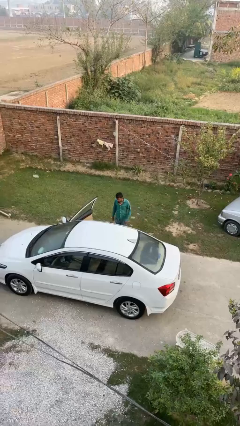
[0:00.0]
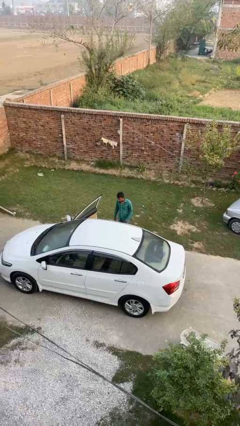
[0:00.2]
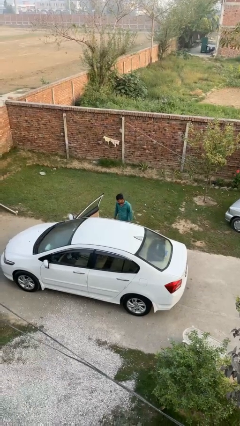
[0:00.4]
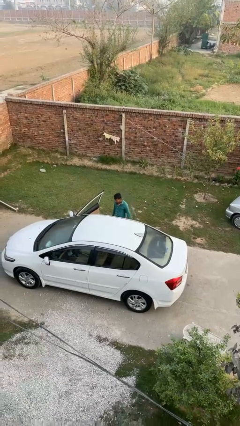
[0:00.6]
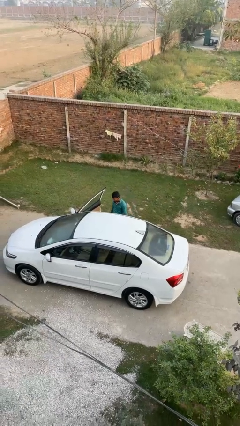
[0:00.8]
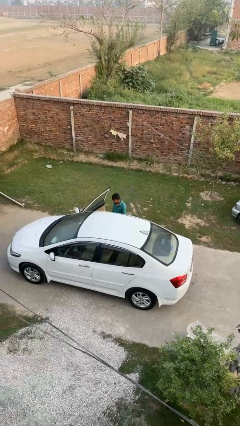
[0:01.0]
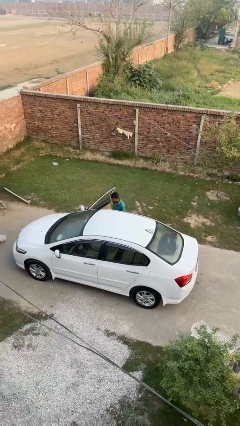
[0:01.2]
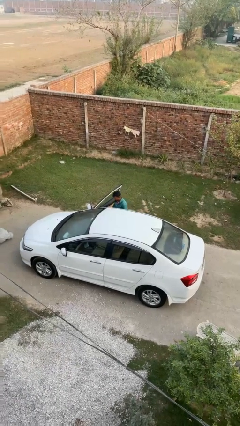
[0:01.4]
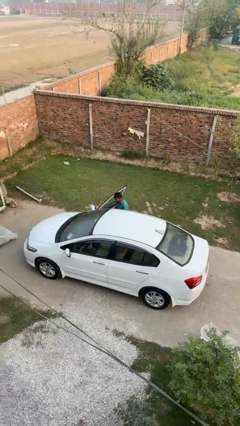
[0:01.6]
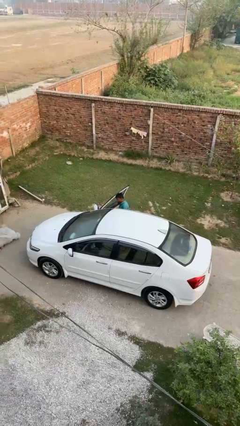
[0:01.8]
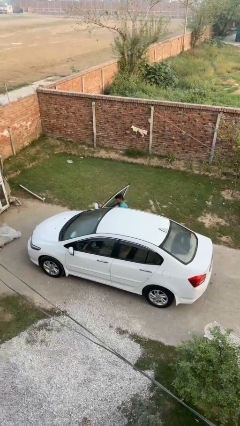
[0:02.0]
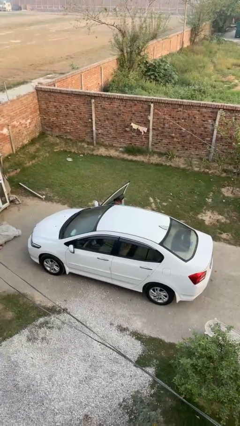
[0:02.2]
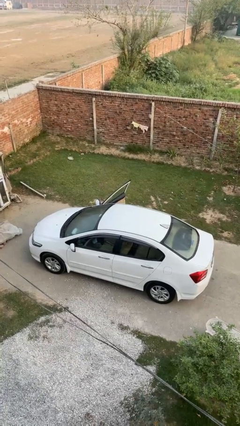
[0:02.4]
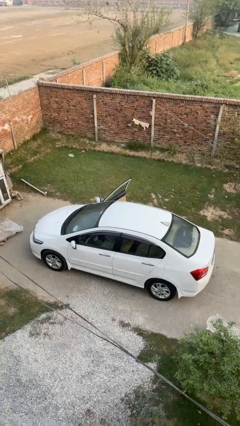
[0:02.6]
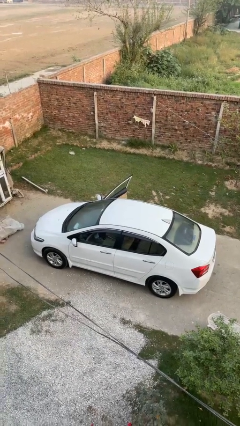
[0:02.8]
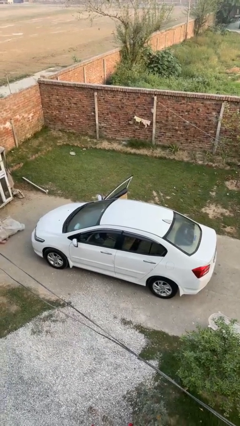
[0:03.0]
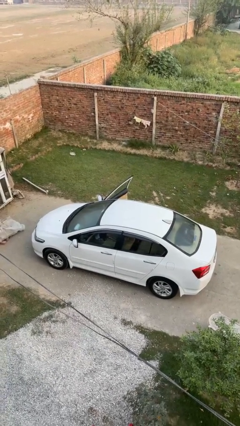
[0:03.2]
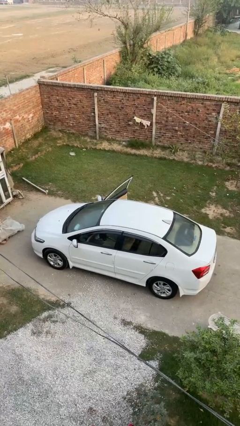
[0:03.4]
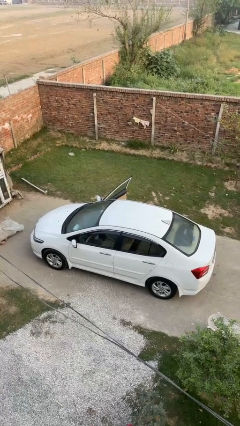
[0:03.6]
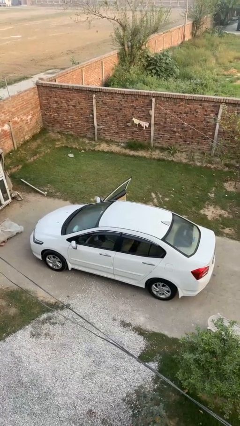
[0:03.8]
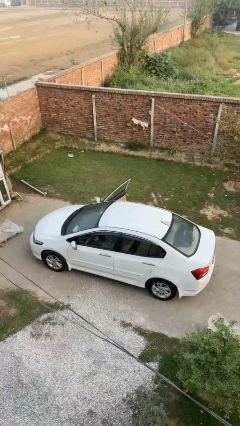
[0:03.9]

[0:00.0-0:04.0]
person enters car

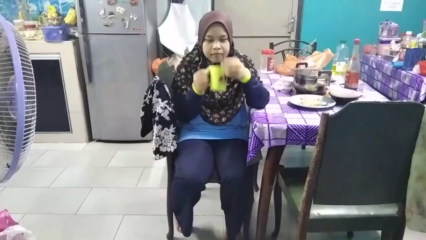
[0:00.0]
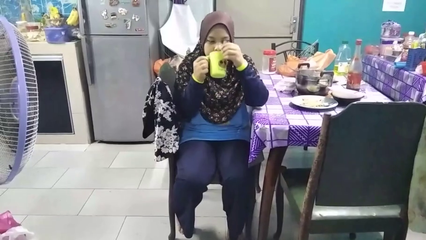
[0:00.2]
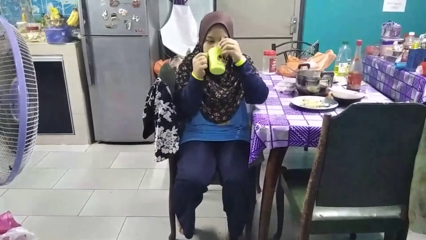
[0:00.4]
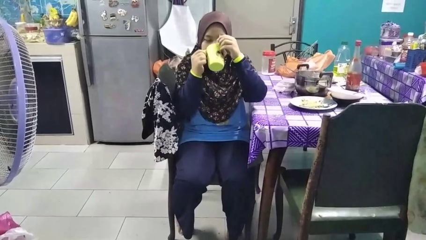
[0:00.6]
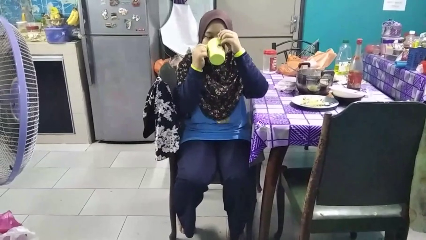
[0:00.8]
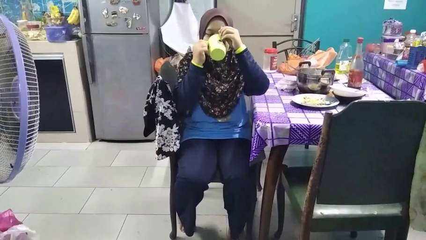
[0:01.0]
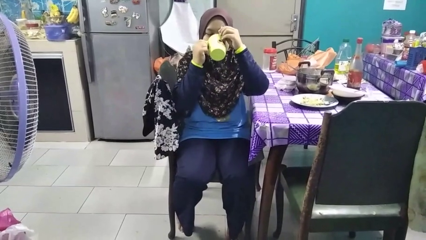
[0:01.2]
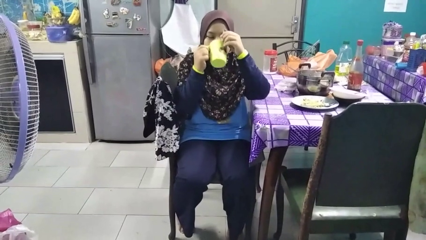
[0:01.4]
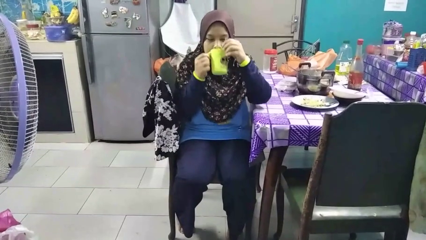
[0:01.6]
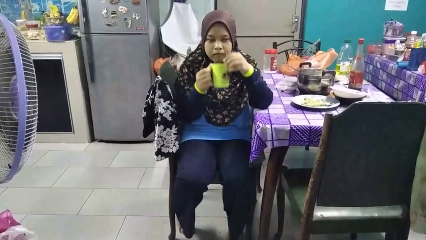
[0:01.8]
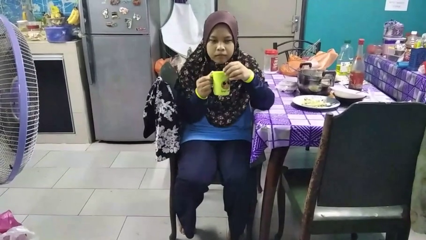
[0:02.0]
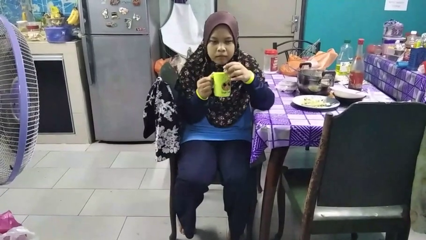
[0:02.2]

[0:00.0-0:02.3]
person drinks from mug

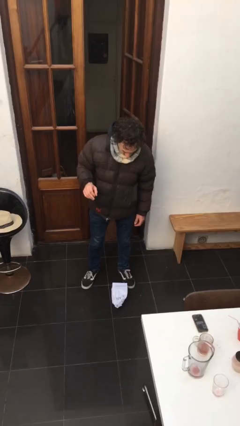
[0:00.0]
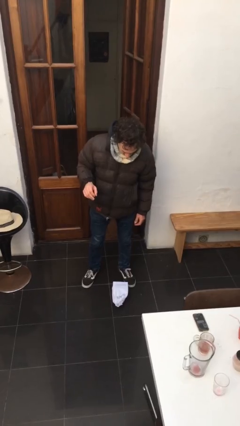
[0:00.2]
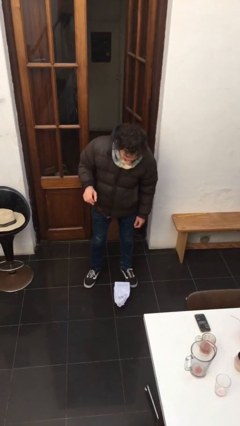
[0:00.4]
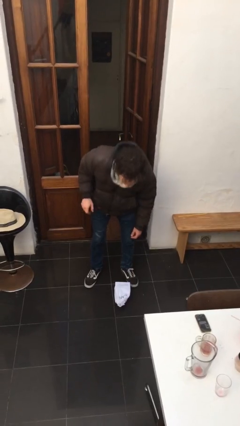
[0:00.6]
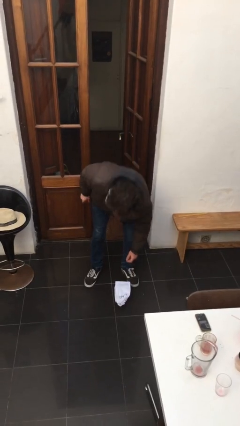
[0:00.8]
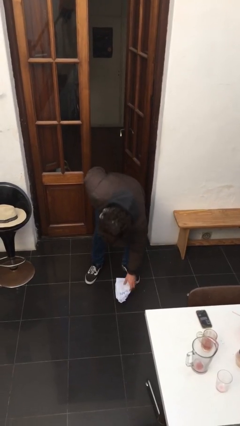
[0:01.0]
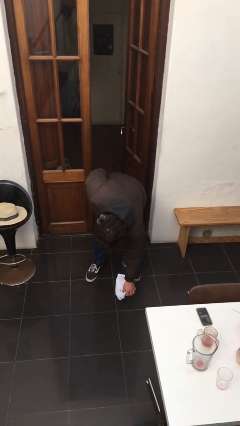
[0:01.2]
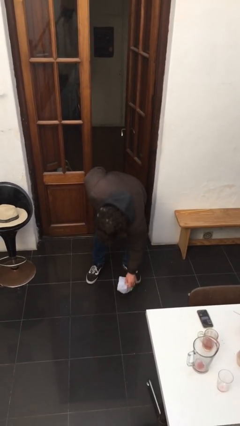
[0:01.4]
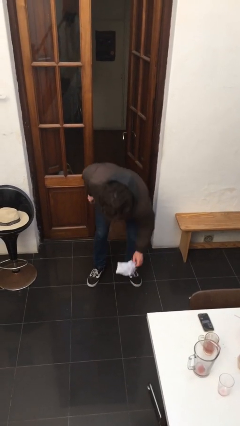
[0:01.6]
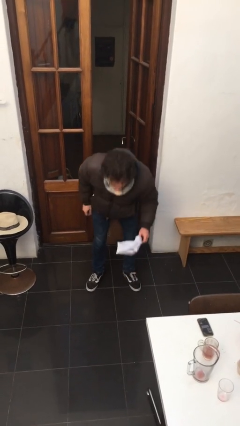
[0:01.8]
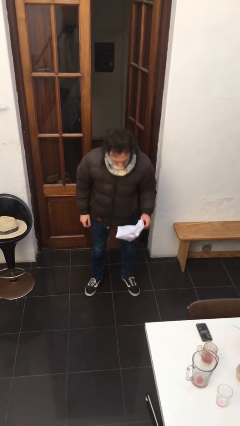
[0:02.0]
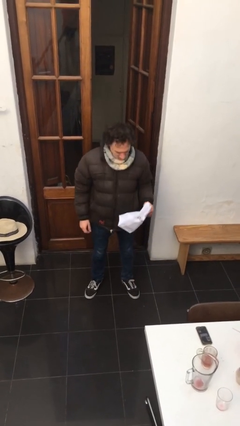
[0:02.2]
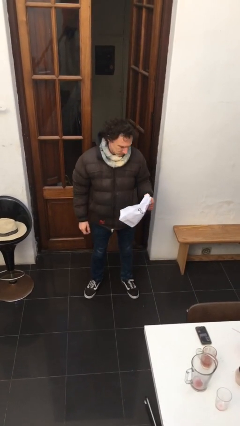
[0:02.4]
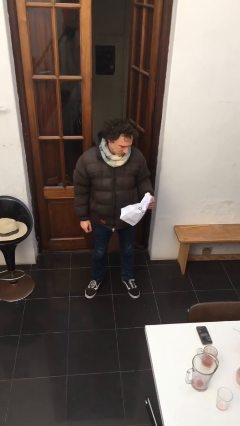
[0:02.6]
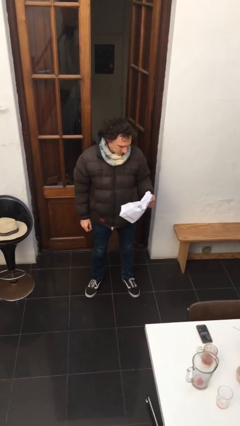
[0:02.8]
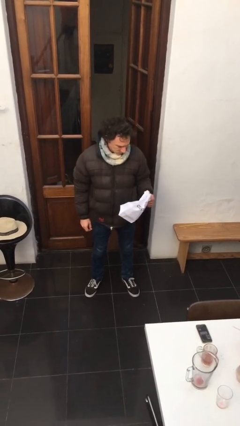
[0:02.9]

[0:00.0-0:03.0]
person picks up object from floor

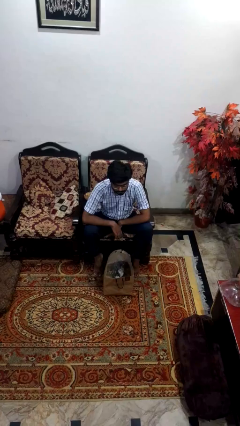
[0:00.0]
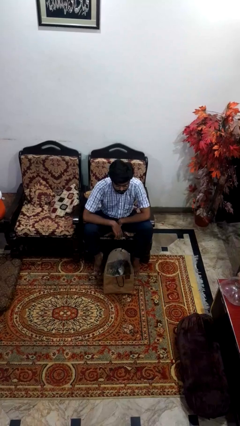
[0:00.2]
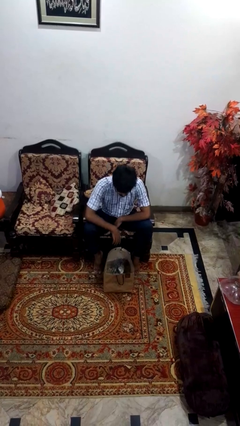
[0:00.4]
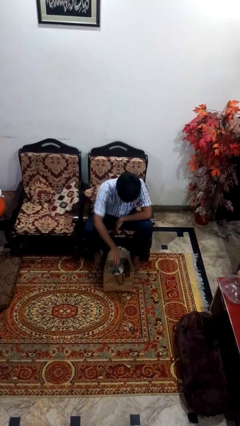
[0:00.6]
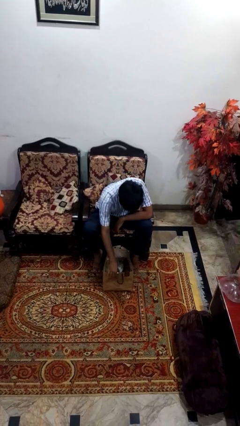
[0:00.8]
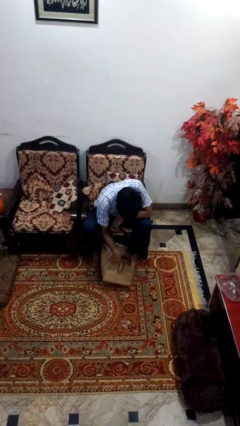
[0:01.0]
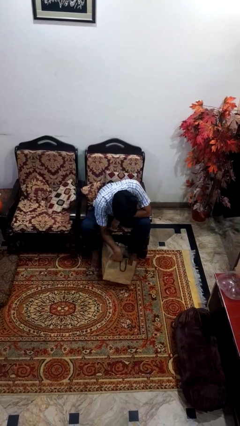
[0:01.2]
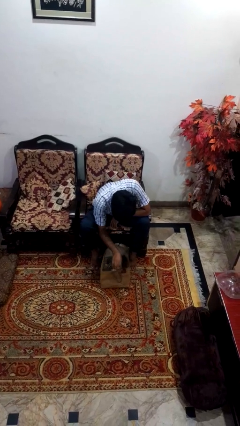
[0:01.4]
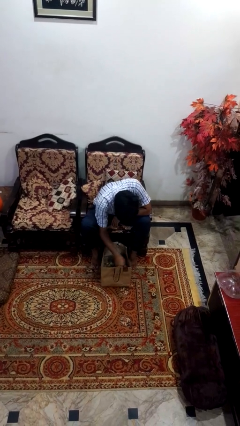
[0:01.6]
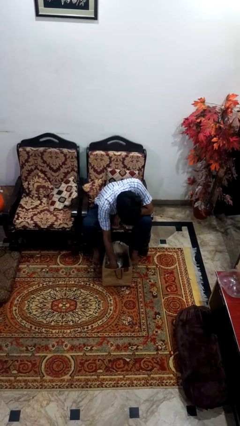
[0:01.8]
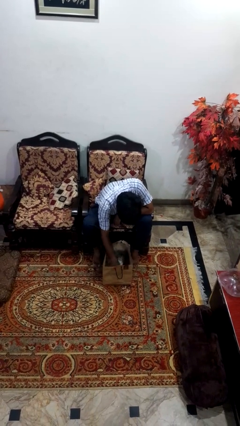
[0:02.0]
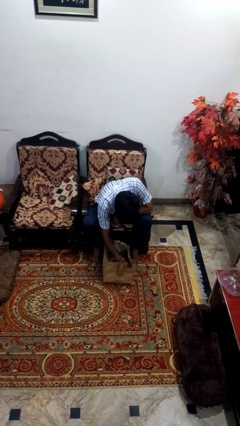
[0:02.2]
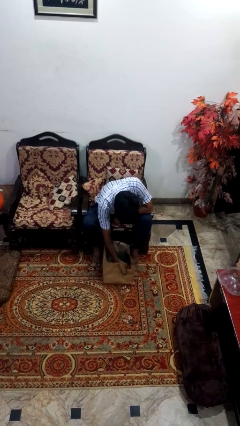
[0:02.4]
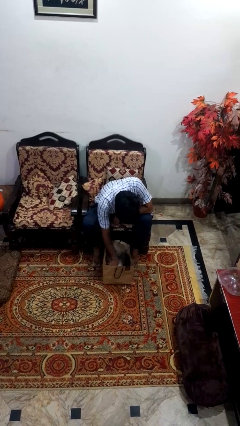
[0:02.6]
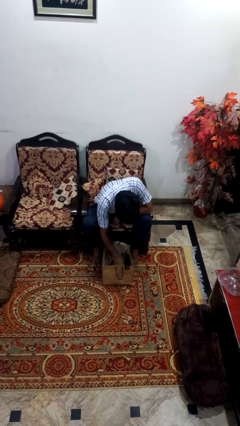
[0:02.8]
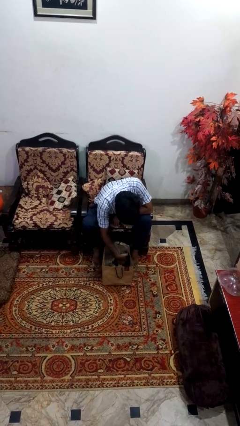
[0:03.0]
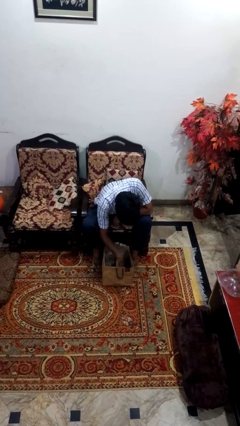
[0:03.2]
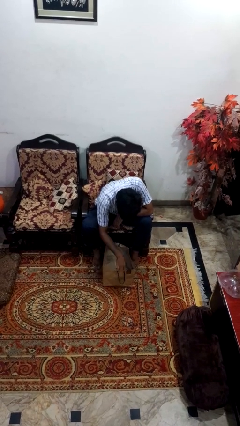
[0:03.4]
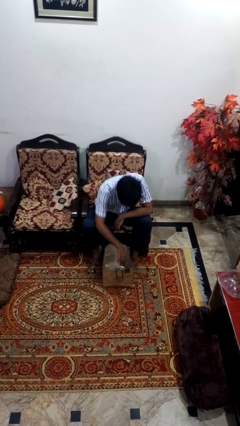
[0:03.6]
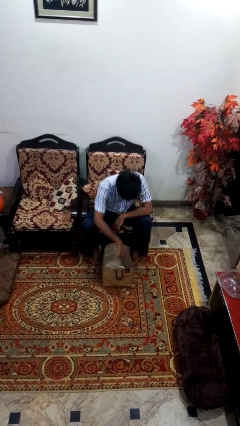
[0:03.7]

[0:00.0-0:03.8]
person searches in bag

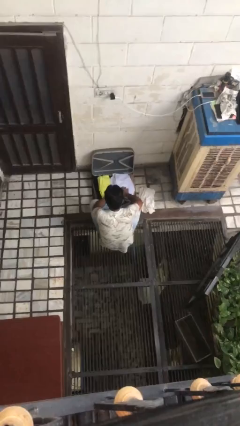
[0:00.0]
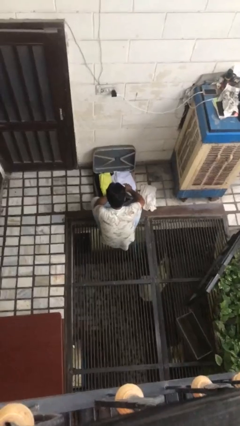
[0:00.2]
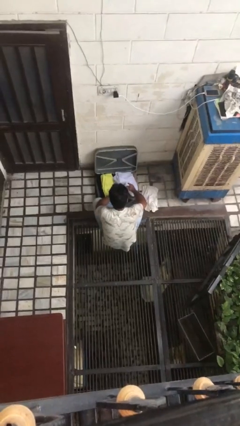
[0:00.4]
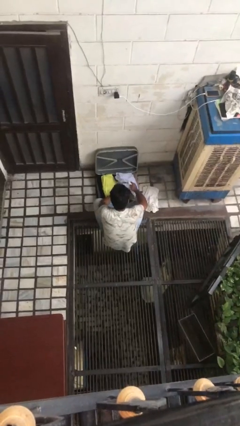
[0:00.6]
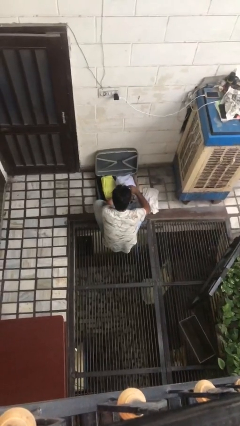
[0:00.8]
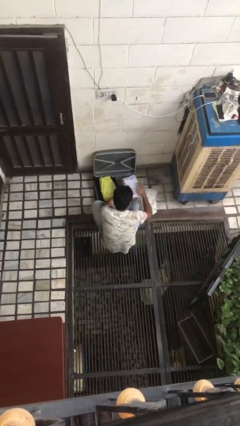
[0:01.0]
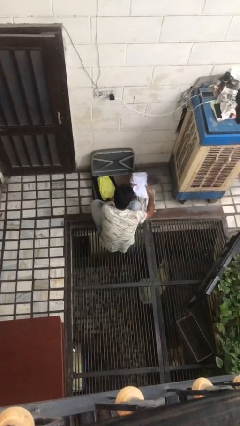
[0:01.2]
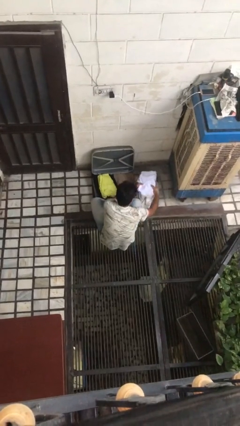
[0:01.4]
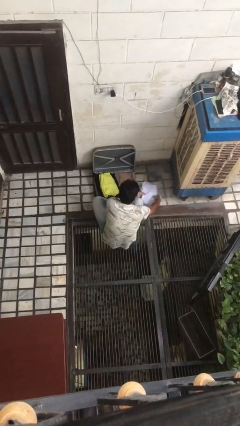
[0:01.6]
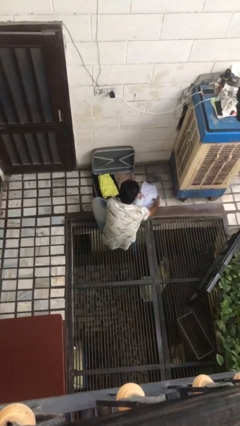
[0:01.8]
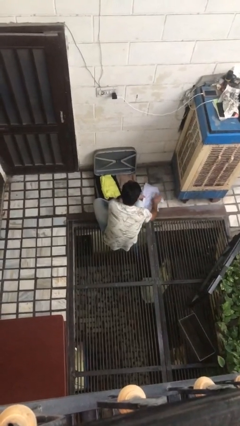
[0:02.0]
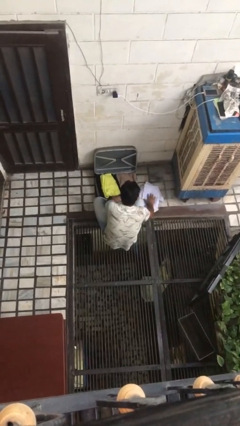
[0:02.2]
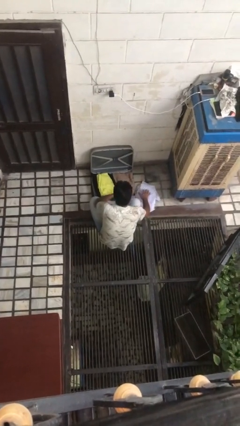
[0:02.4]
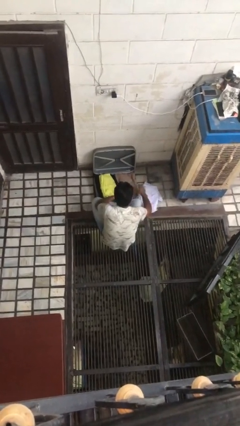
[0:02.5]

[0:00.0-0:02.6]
person unloads clothes from suitcase

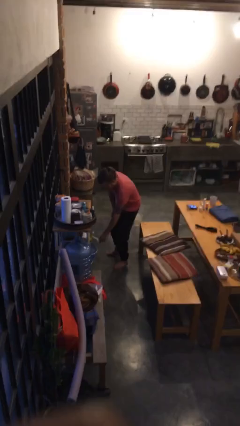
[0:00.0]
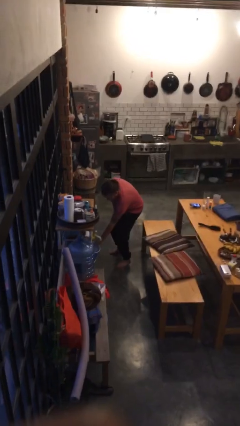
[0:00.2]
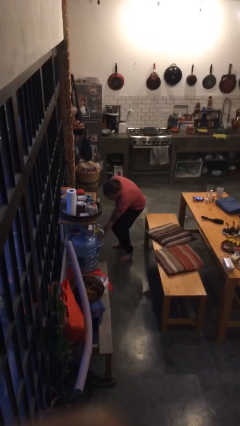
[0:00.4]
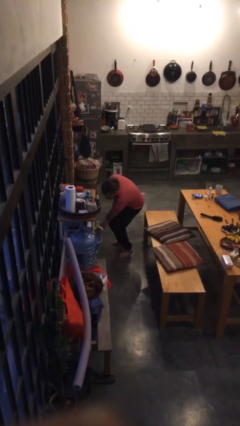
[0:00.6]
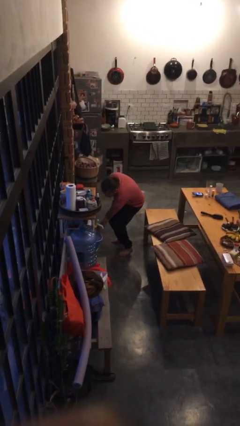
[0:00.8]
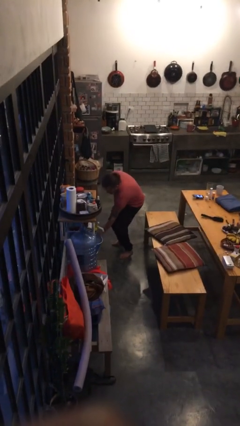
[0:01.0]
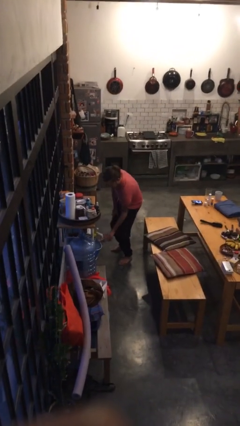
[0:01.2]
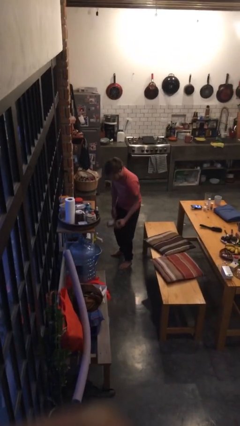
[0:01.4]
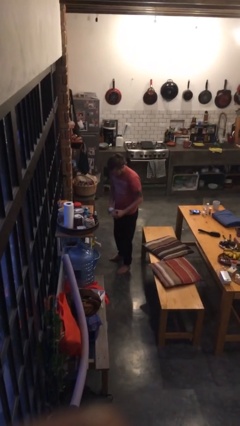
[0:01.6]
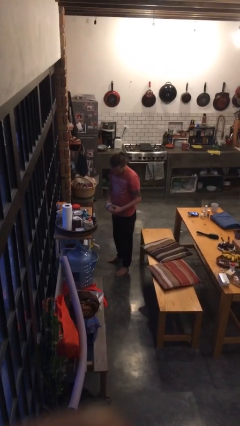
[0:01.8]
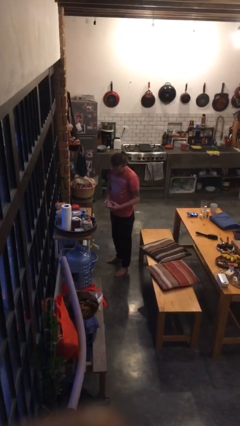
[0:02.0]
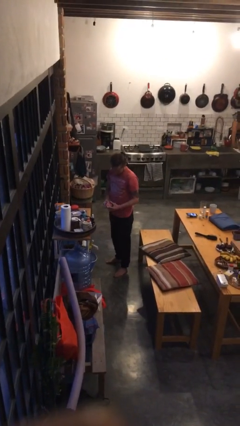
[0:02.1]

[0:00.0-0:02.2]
person picks up object from cabinet
